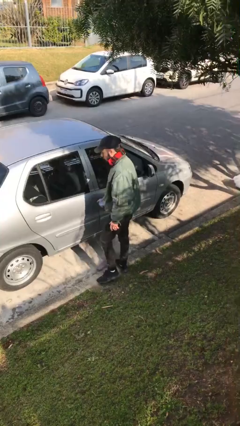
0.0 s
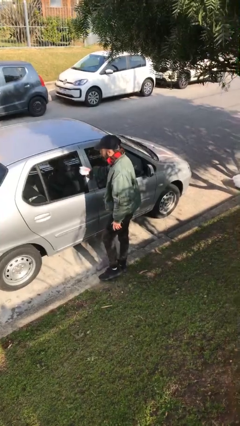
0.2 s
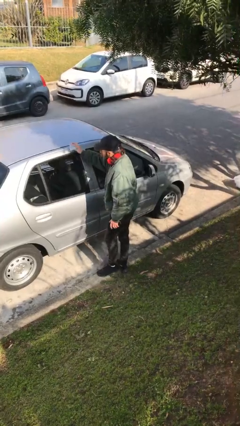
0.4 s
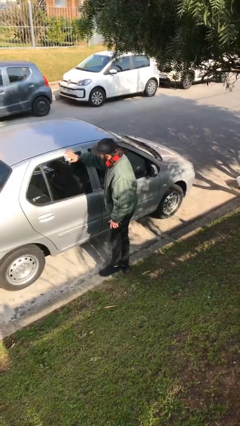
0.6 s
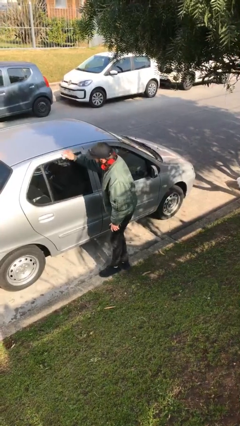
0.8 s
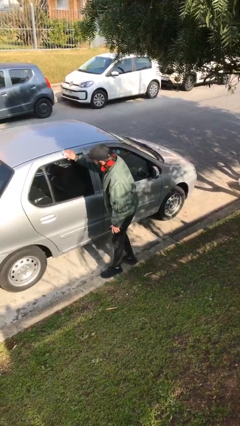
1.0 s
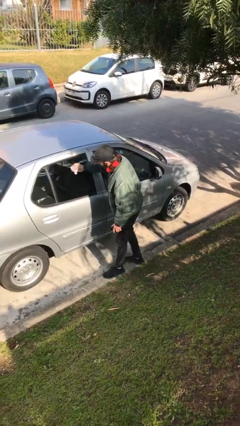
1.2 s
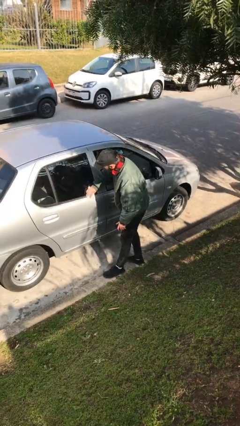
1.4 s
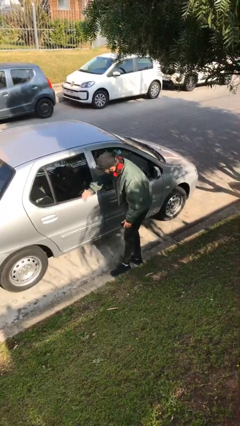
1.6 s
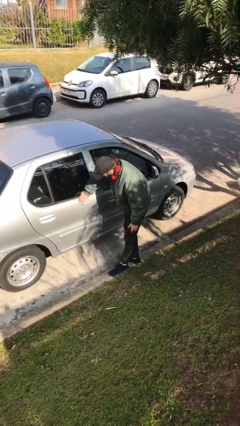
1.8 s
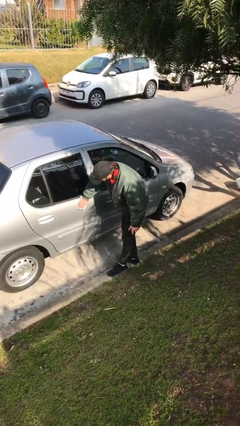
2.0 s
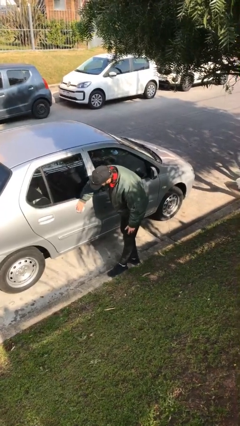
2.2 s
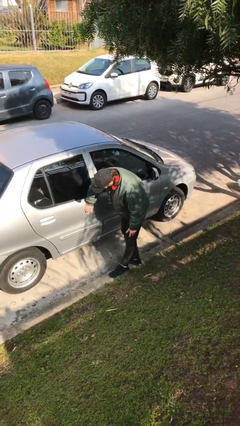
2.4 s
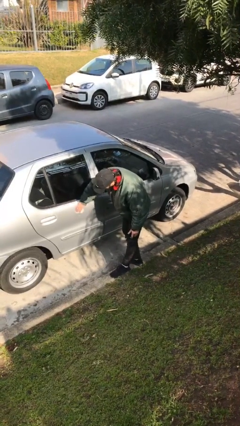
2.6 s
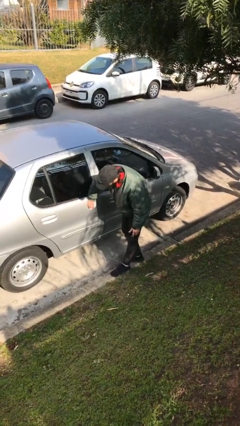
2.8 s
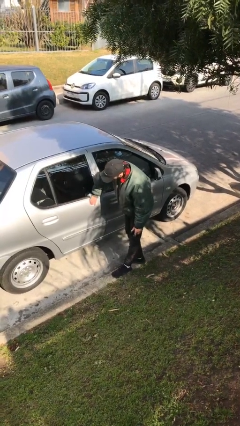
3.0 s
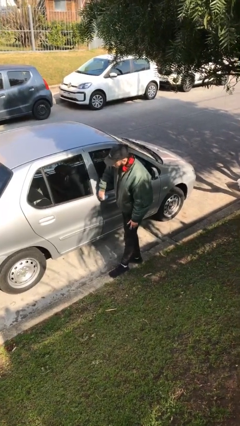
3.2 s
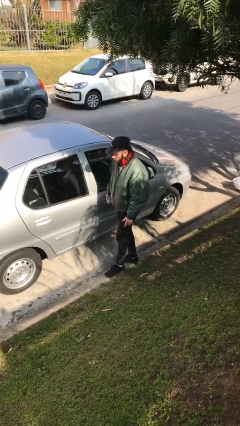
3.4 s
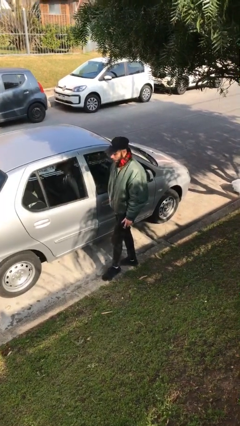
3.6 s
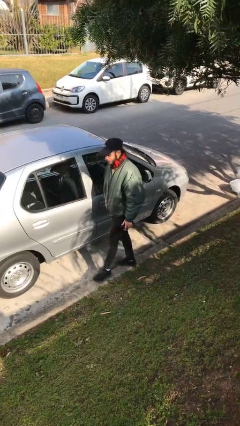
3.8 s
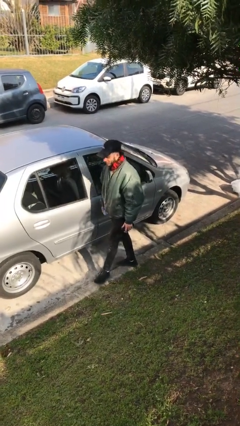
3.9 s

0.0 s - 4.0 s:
person polishes car with rag

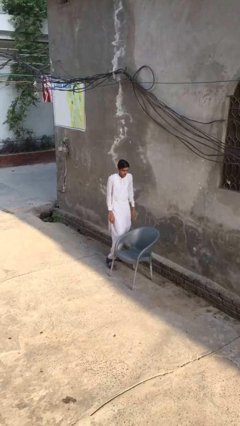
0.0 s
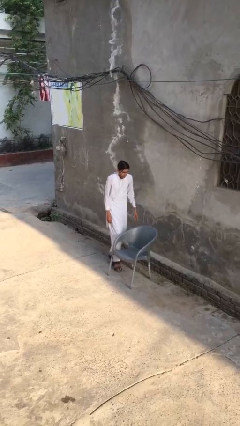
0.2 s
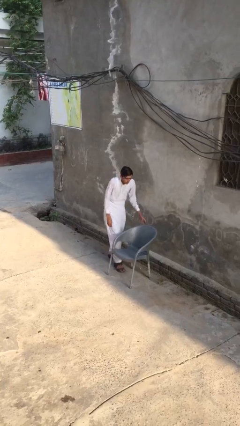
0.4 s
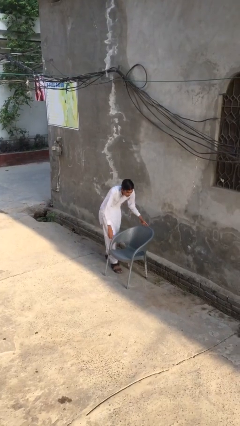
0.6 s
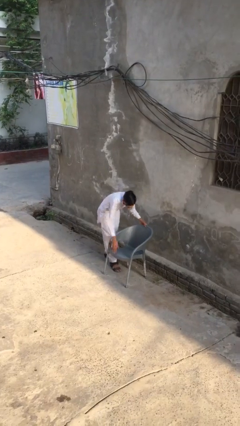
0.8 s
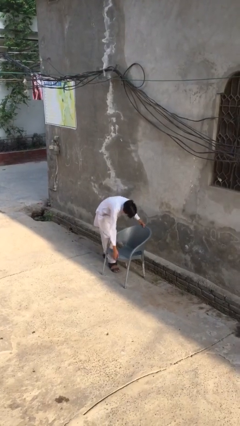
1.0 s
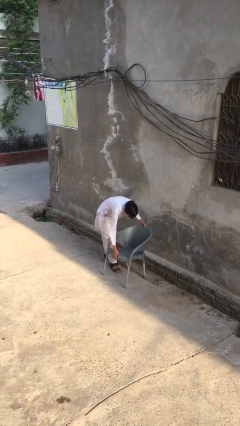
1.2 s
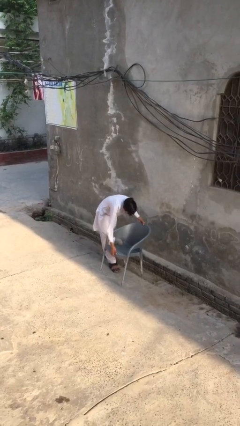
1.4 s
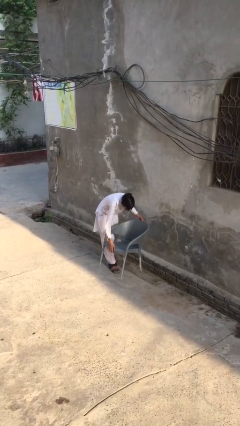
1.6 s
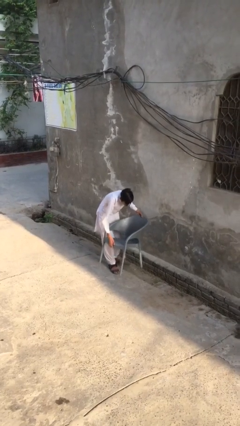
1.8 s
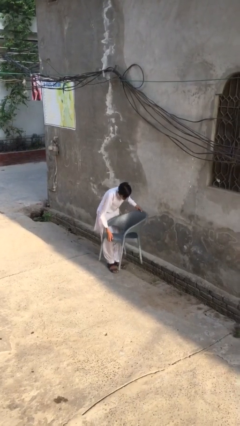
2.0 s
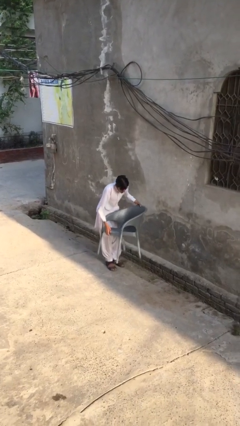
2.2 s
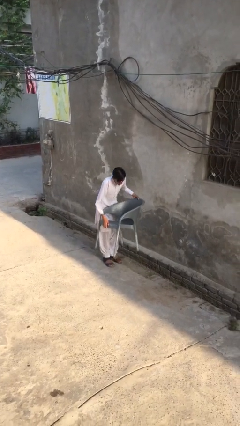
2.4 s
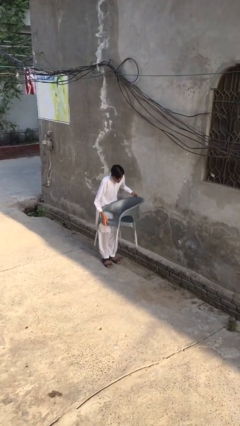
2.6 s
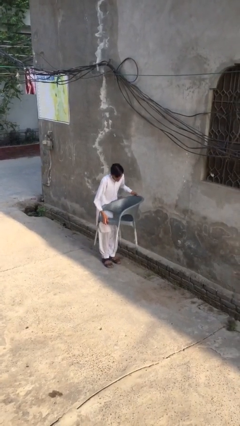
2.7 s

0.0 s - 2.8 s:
person picks up object from floor

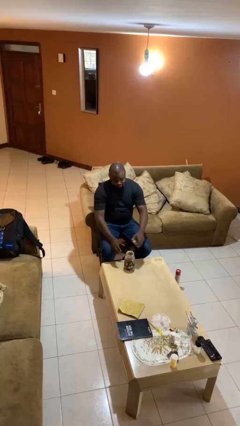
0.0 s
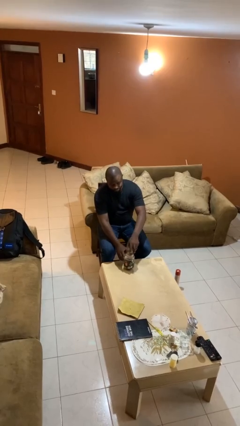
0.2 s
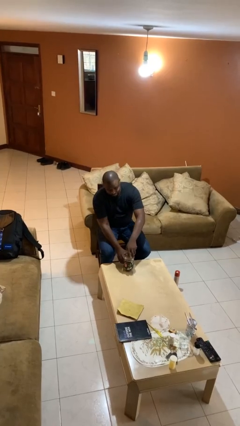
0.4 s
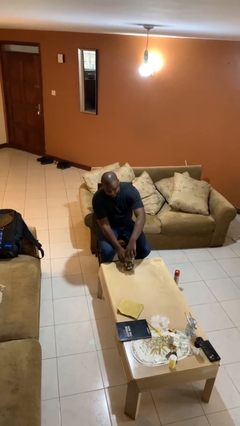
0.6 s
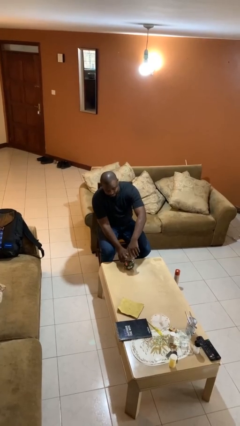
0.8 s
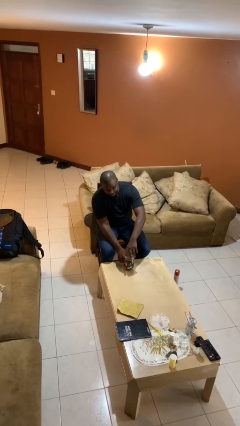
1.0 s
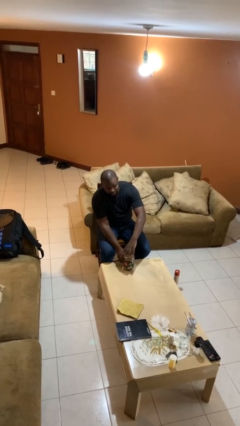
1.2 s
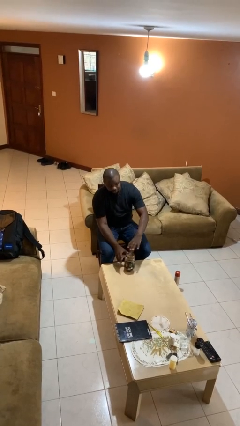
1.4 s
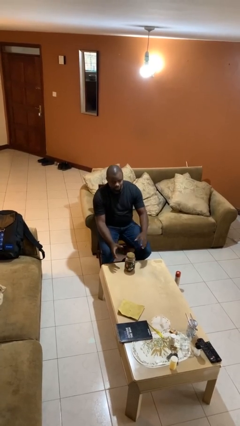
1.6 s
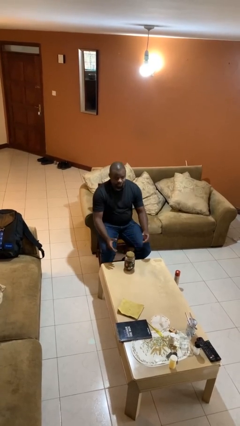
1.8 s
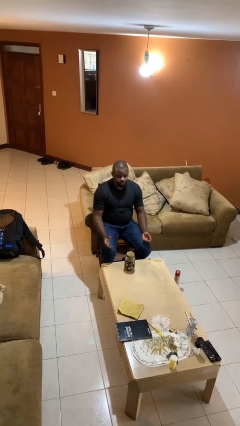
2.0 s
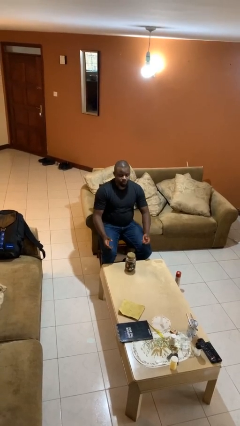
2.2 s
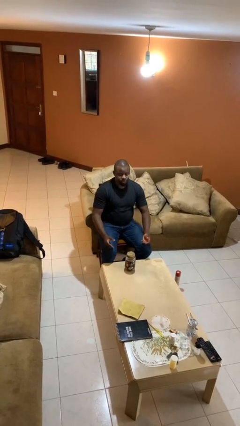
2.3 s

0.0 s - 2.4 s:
person closes jar

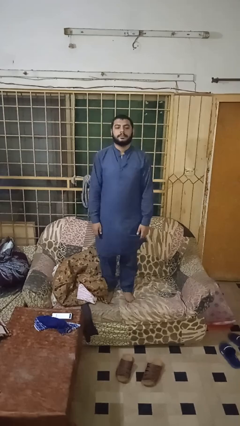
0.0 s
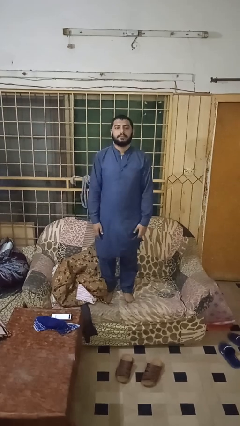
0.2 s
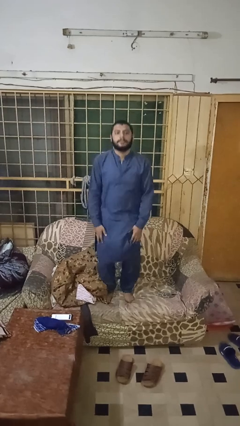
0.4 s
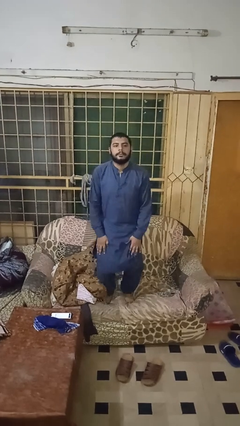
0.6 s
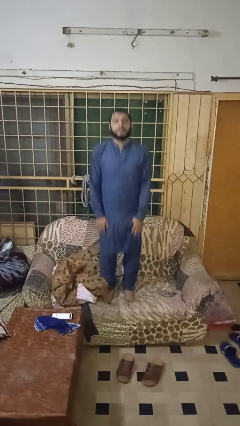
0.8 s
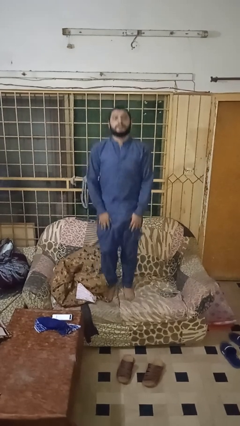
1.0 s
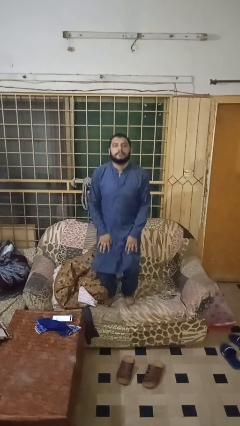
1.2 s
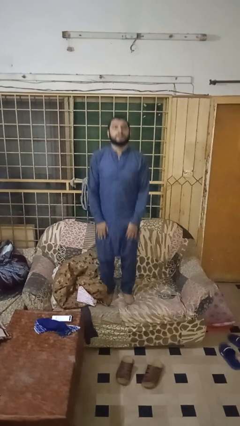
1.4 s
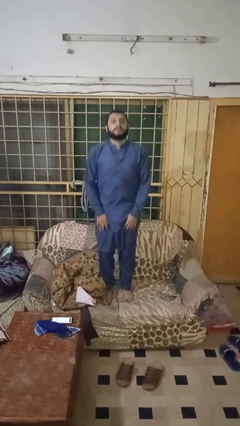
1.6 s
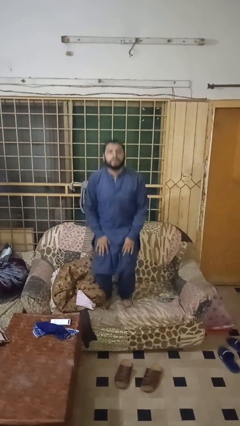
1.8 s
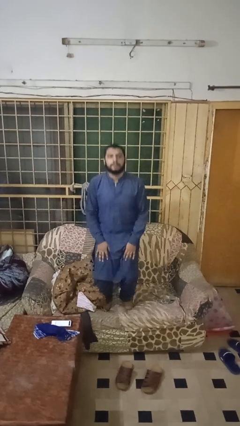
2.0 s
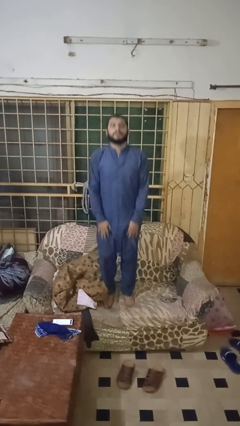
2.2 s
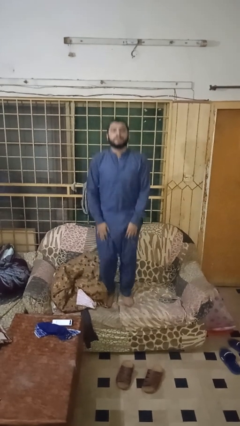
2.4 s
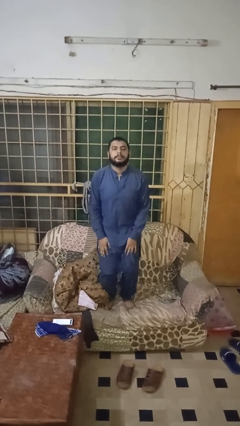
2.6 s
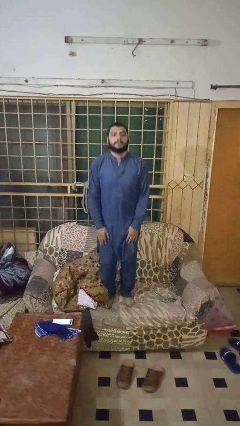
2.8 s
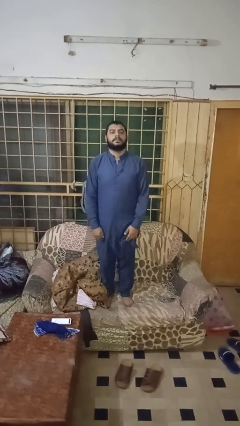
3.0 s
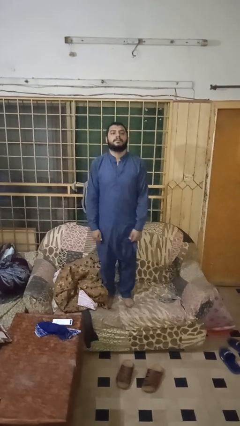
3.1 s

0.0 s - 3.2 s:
person jumps on couch

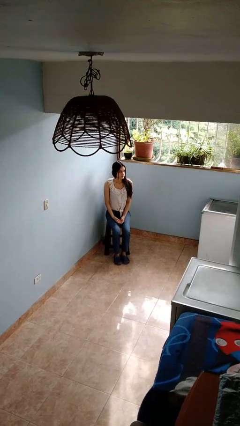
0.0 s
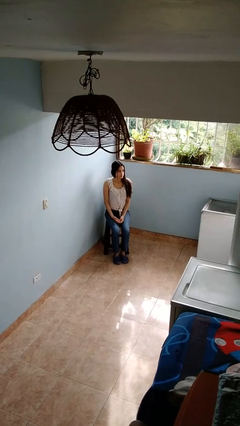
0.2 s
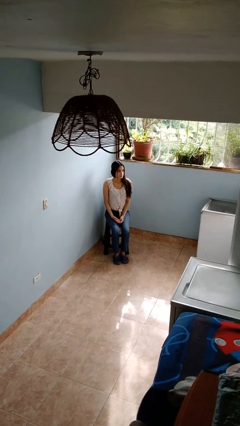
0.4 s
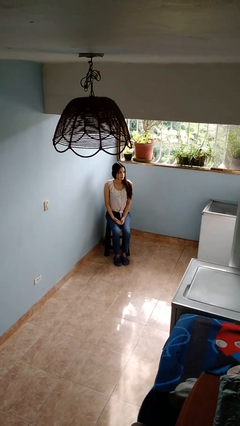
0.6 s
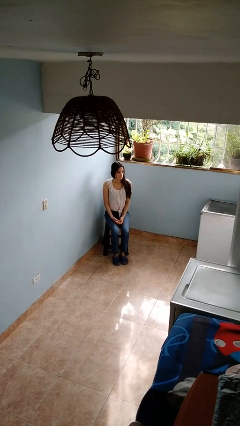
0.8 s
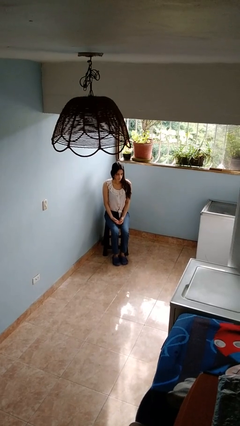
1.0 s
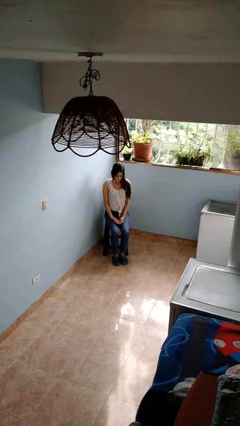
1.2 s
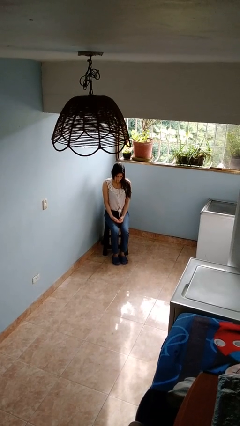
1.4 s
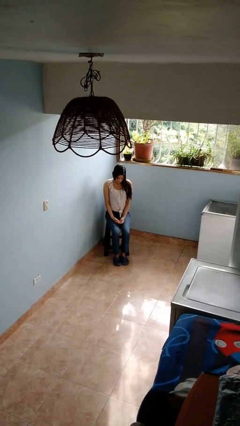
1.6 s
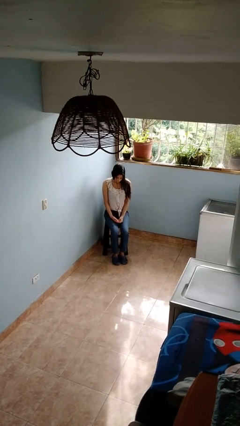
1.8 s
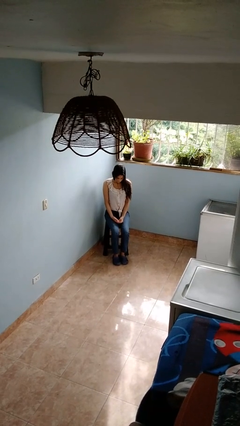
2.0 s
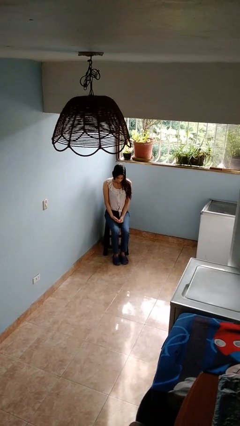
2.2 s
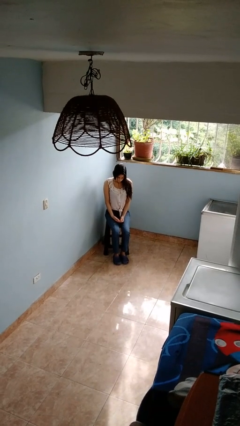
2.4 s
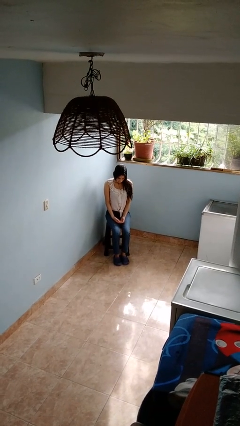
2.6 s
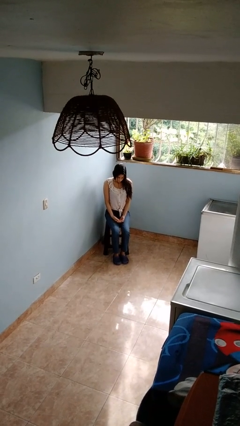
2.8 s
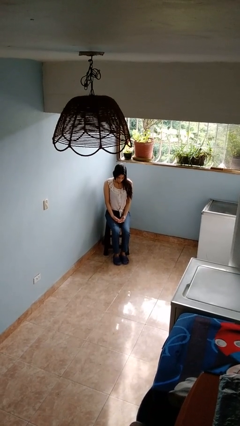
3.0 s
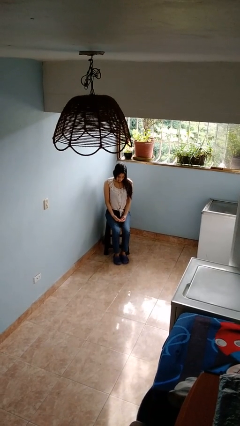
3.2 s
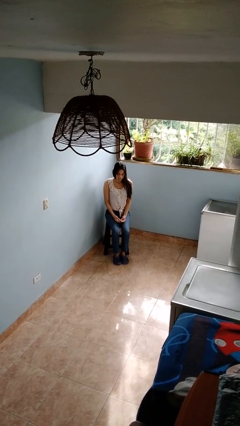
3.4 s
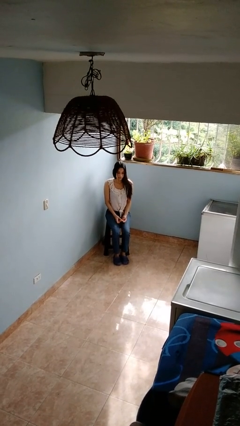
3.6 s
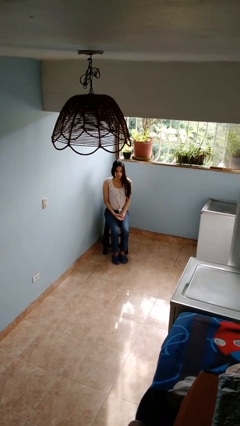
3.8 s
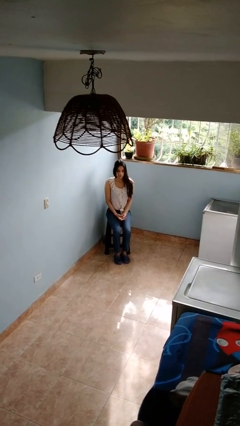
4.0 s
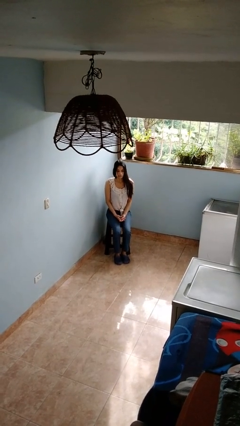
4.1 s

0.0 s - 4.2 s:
person looks at hands in lap

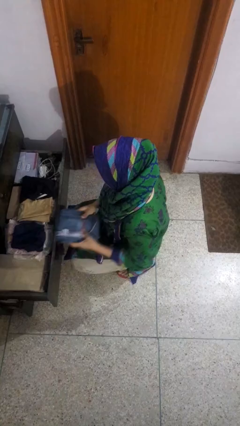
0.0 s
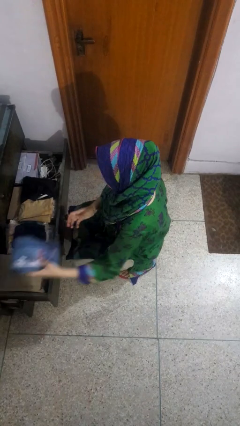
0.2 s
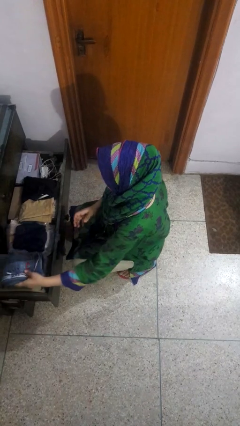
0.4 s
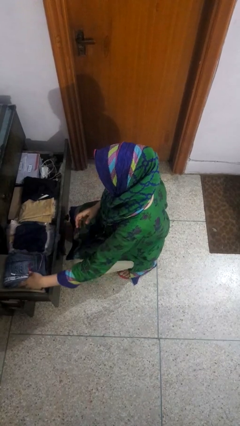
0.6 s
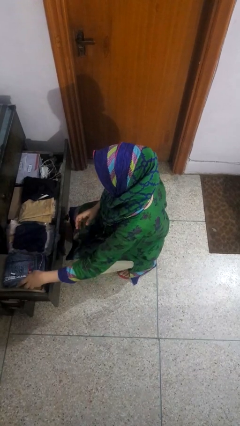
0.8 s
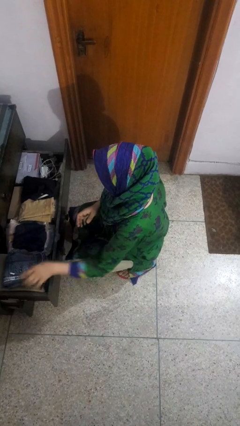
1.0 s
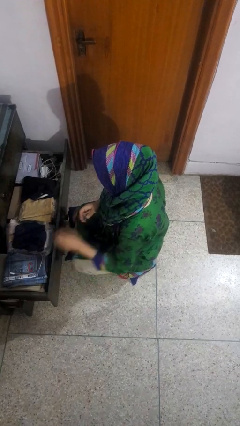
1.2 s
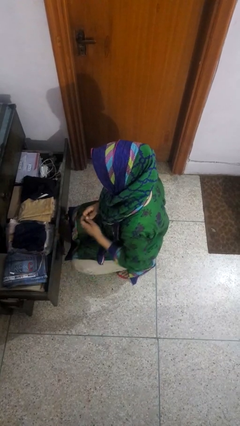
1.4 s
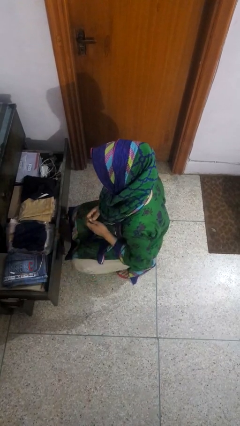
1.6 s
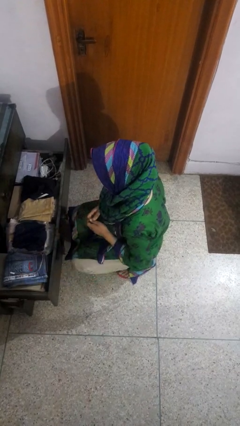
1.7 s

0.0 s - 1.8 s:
person puts clothes into dresser
